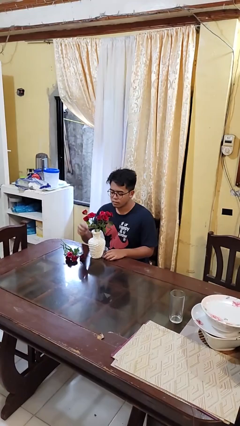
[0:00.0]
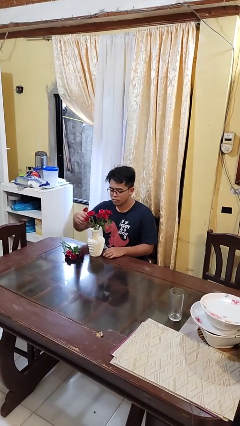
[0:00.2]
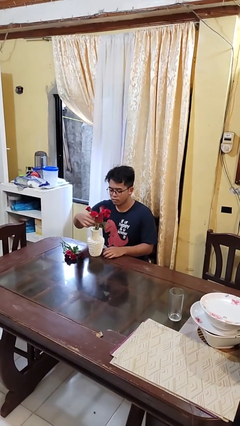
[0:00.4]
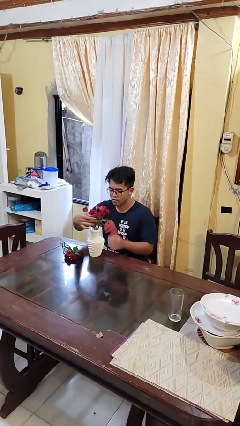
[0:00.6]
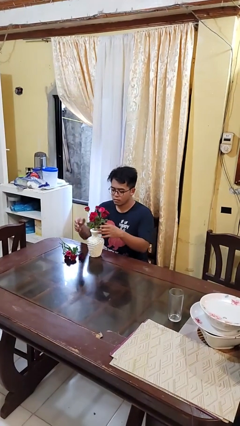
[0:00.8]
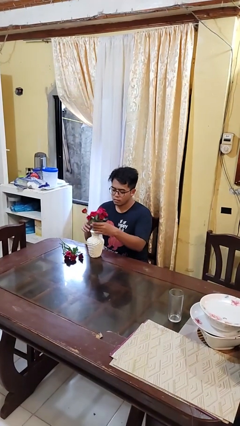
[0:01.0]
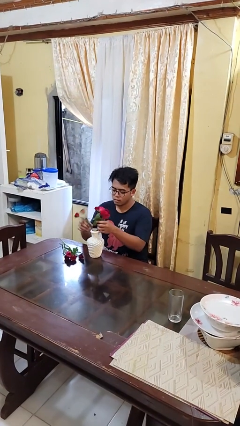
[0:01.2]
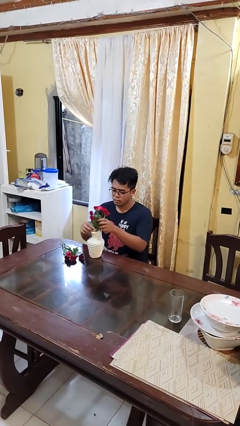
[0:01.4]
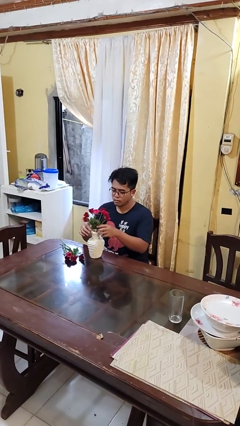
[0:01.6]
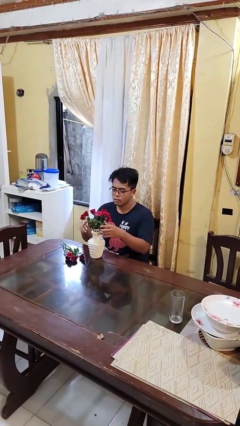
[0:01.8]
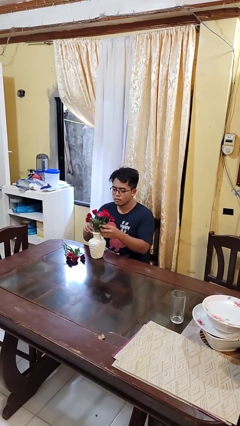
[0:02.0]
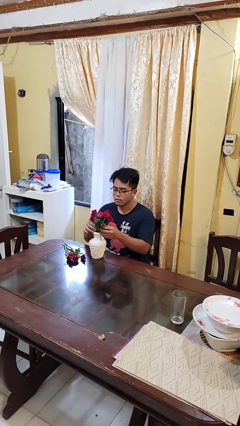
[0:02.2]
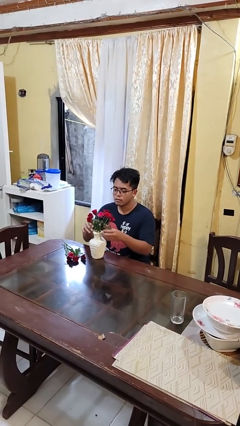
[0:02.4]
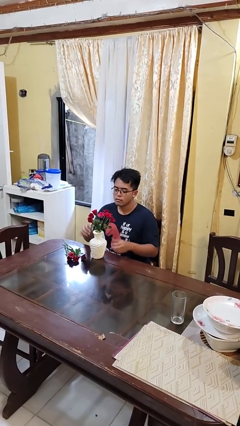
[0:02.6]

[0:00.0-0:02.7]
person arranges flowers in vase

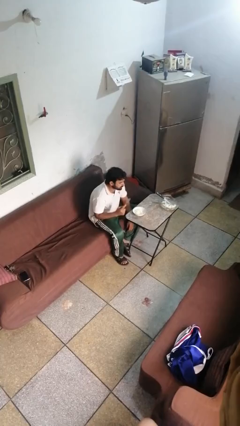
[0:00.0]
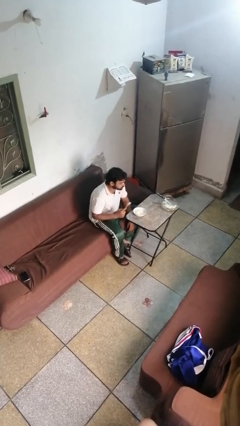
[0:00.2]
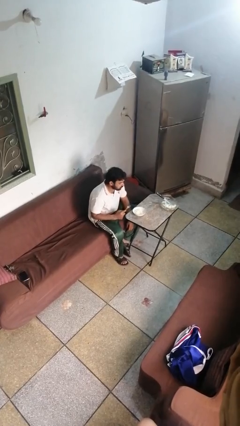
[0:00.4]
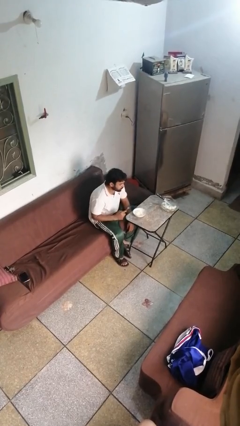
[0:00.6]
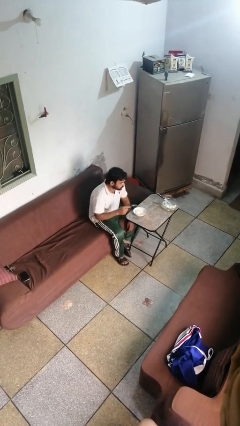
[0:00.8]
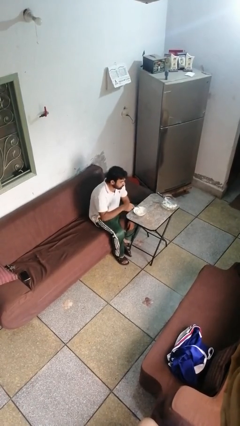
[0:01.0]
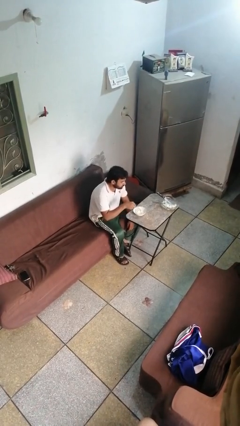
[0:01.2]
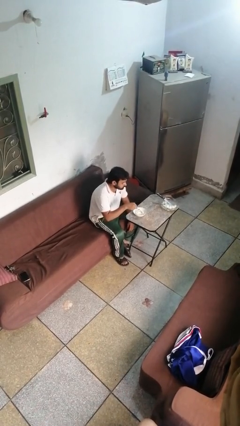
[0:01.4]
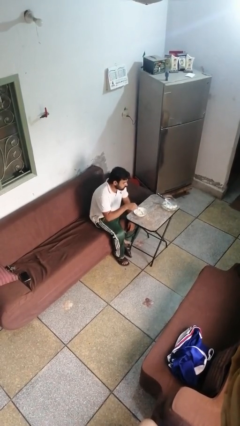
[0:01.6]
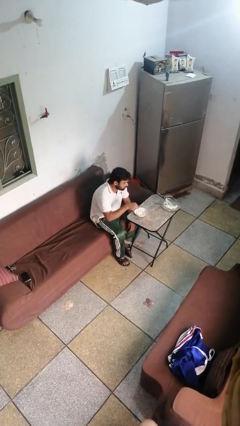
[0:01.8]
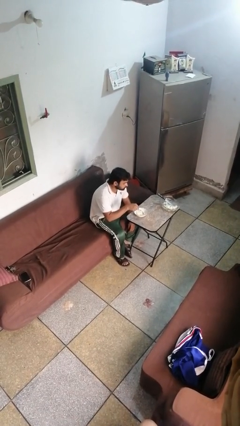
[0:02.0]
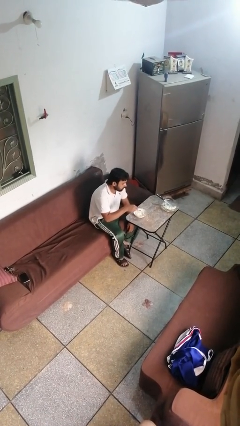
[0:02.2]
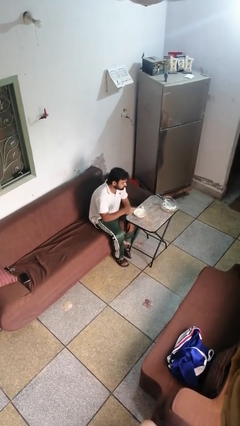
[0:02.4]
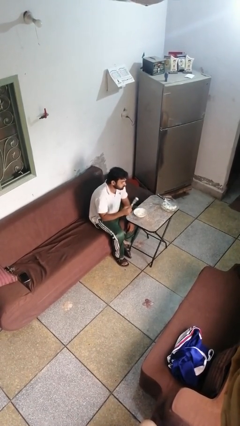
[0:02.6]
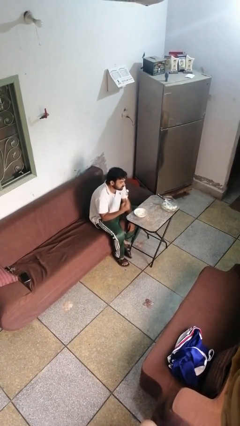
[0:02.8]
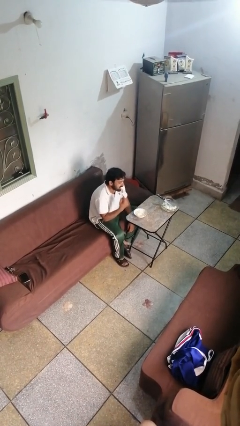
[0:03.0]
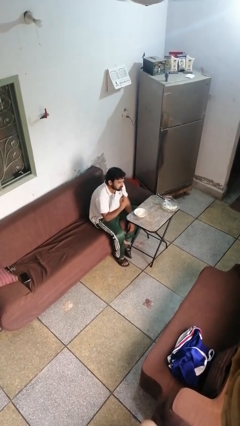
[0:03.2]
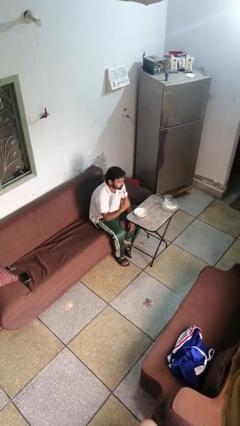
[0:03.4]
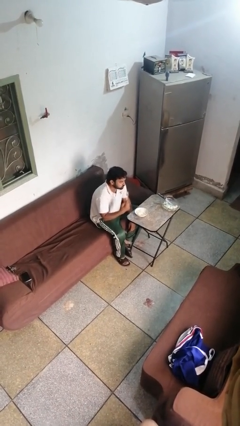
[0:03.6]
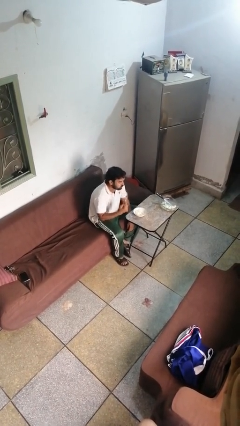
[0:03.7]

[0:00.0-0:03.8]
person eats with utensil

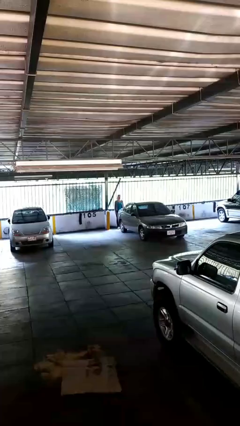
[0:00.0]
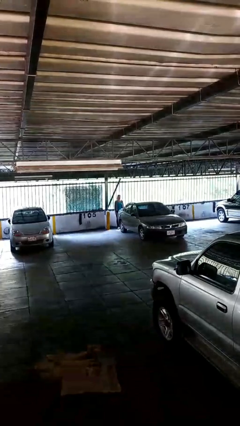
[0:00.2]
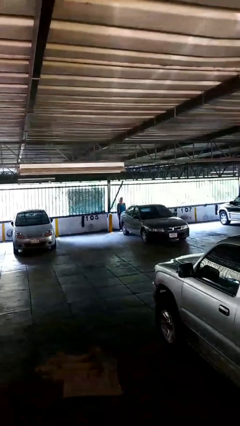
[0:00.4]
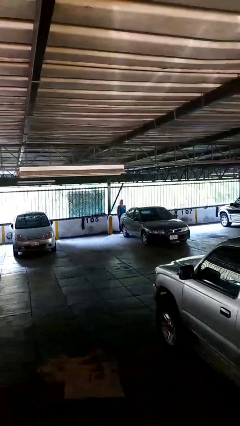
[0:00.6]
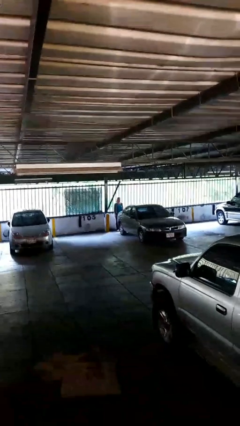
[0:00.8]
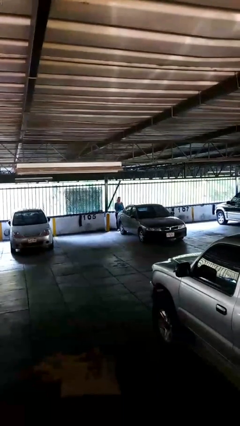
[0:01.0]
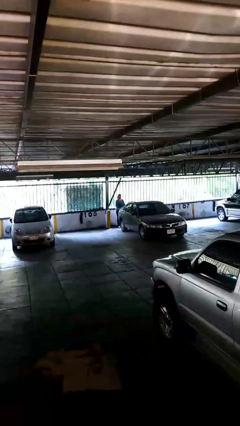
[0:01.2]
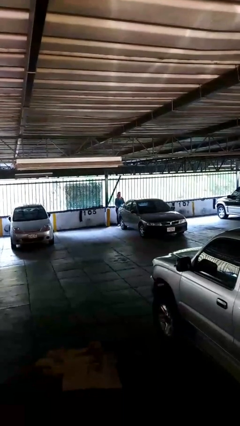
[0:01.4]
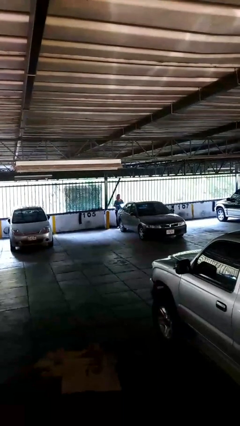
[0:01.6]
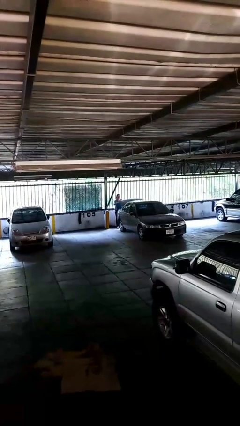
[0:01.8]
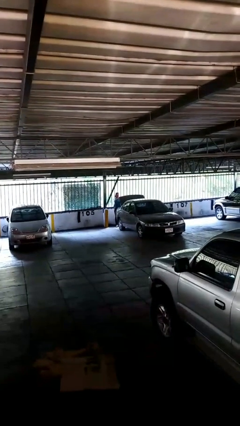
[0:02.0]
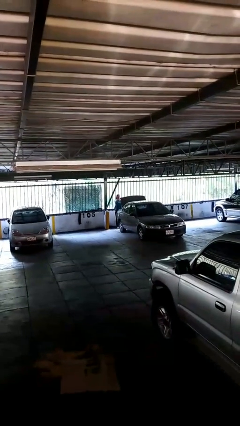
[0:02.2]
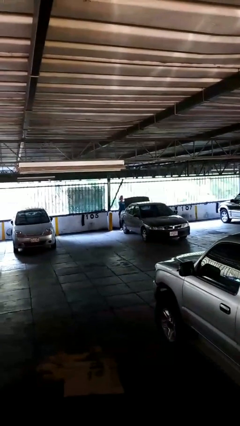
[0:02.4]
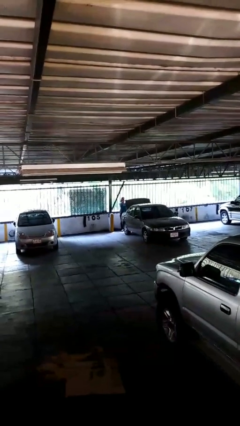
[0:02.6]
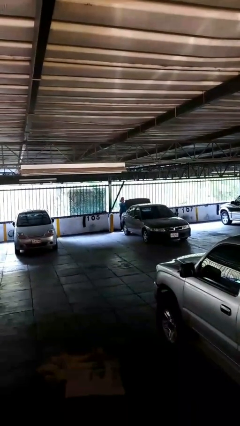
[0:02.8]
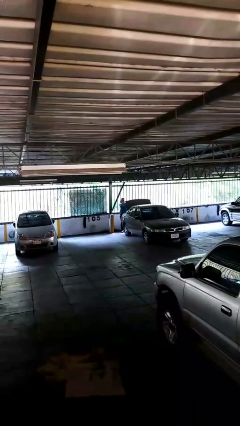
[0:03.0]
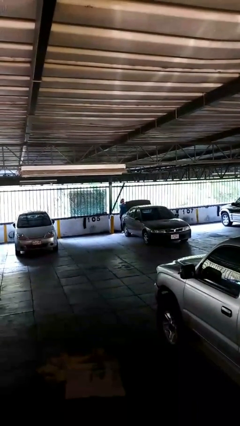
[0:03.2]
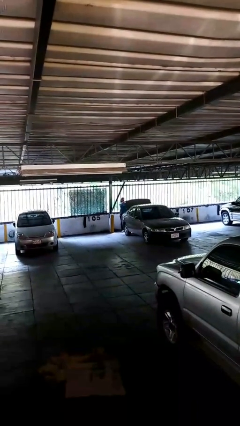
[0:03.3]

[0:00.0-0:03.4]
person opens car trunk

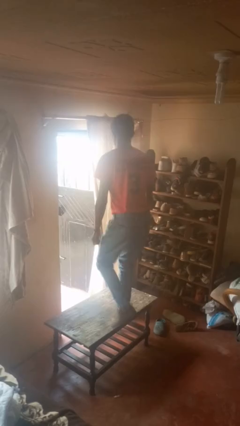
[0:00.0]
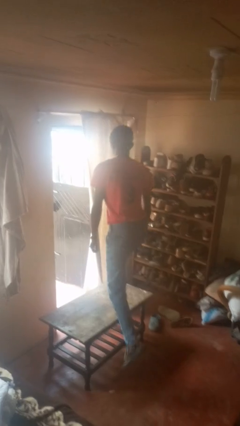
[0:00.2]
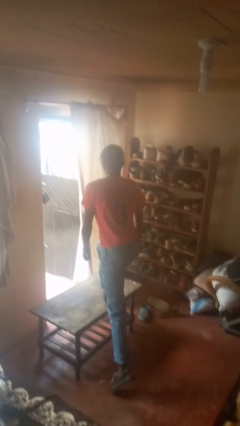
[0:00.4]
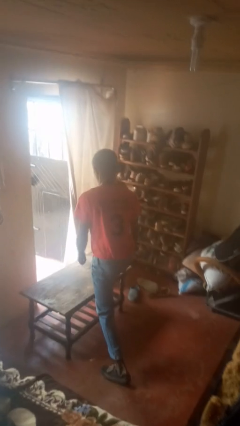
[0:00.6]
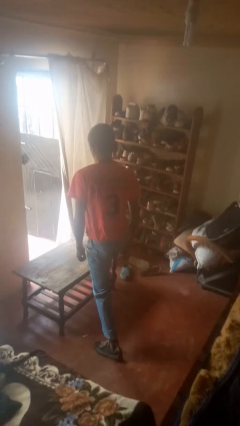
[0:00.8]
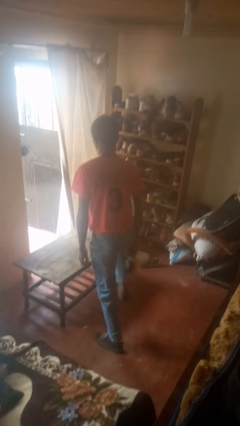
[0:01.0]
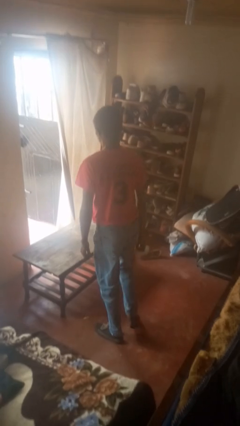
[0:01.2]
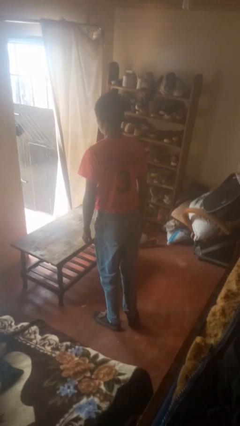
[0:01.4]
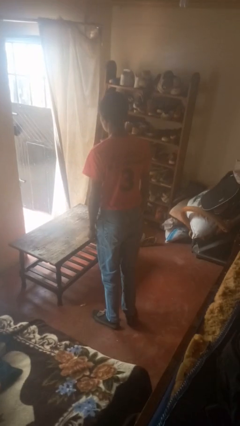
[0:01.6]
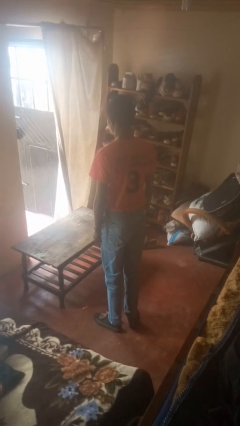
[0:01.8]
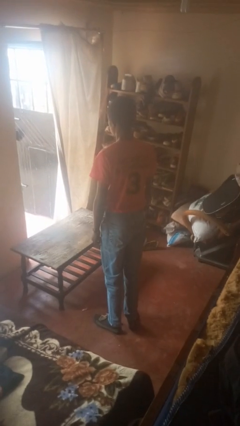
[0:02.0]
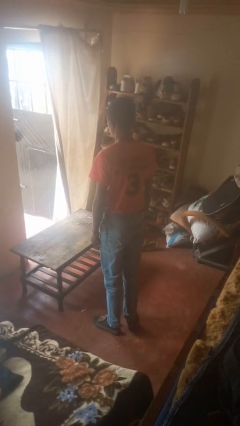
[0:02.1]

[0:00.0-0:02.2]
person climbs off table

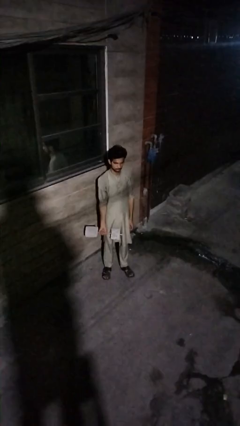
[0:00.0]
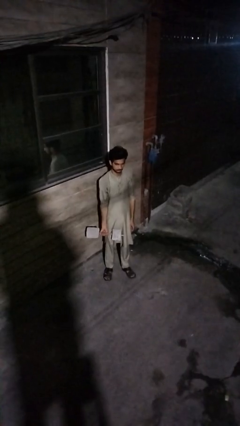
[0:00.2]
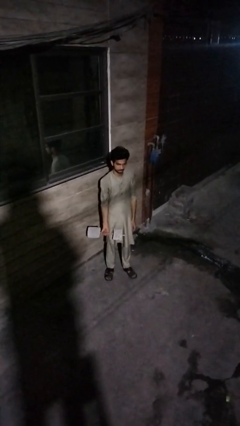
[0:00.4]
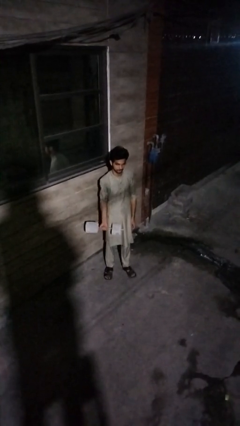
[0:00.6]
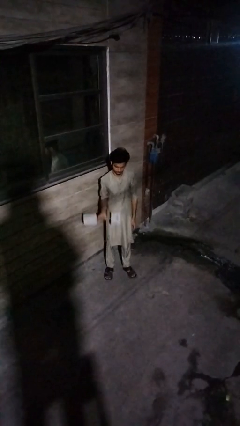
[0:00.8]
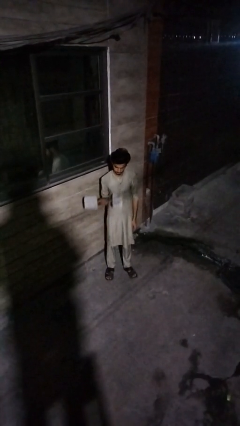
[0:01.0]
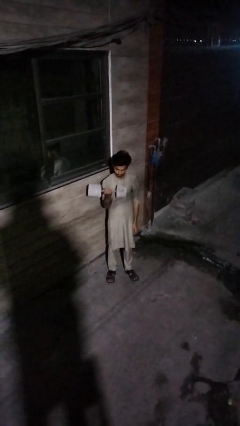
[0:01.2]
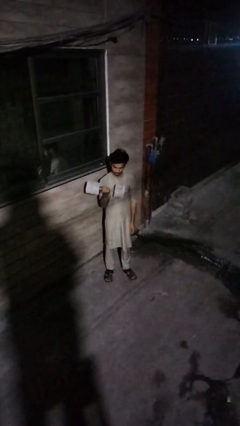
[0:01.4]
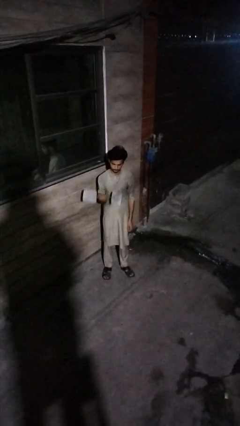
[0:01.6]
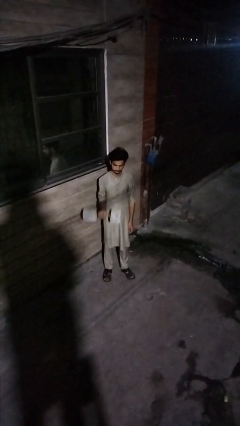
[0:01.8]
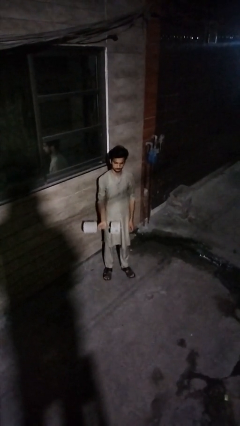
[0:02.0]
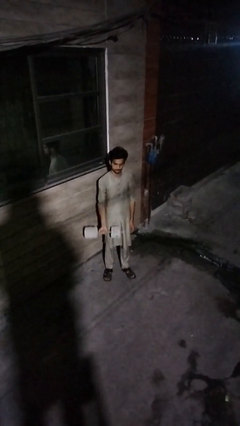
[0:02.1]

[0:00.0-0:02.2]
person lifts dumbbells

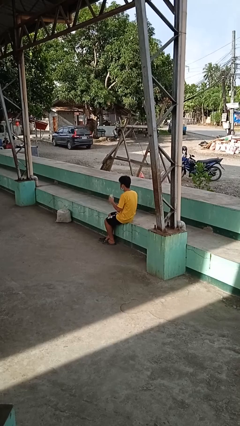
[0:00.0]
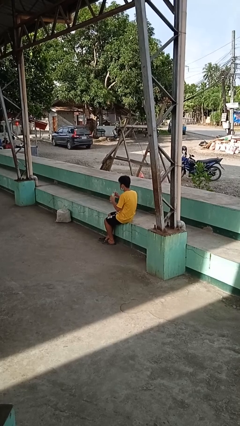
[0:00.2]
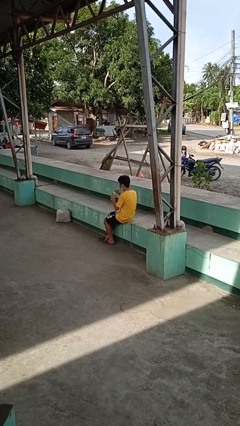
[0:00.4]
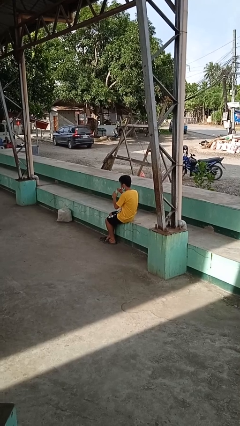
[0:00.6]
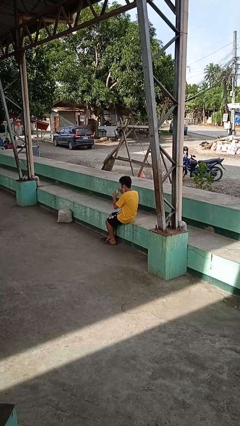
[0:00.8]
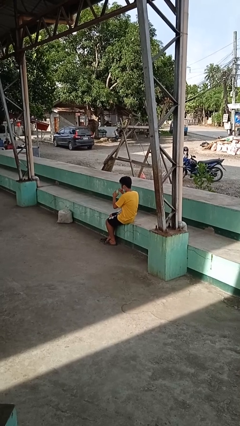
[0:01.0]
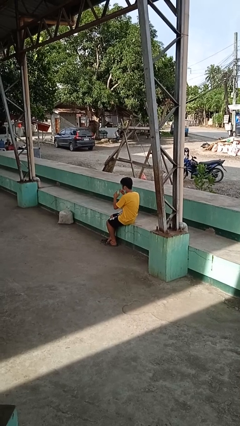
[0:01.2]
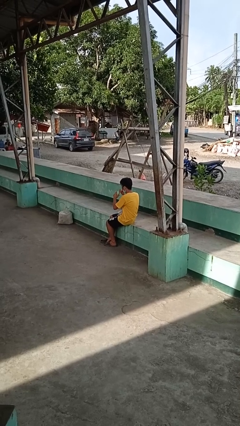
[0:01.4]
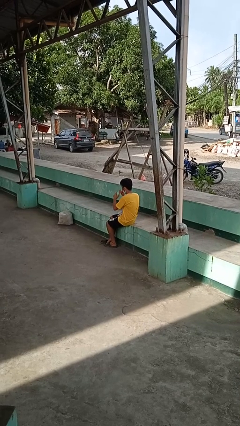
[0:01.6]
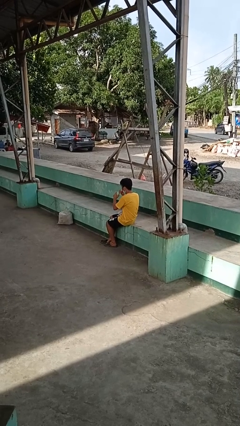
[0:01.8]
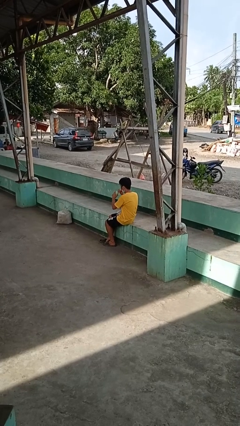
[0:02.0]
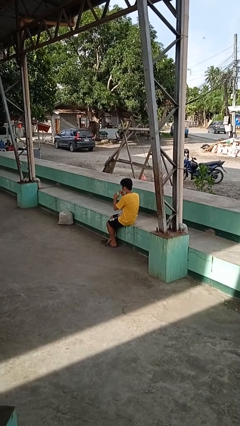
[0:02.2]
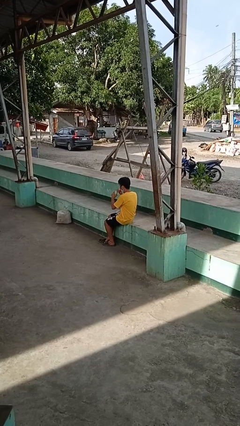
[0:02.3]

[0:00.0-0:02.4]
person drinks from straw

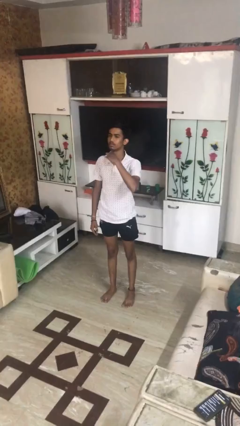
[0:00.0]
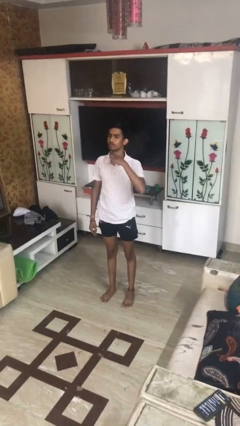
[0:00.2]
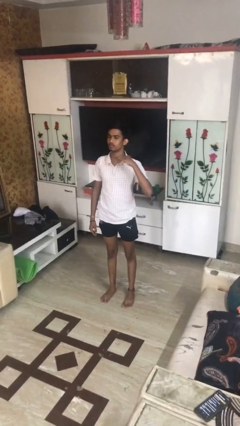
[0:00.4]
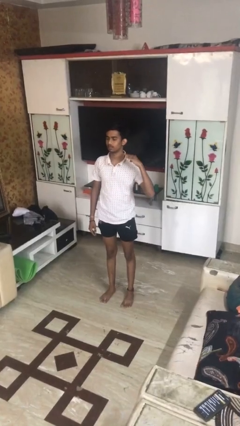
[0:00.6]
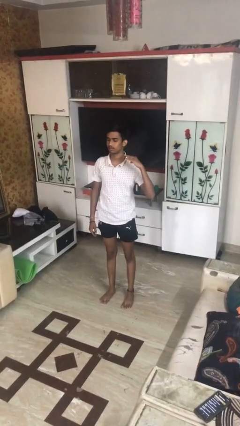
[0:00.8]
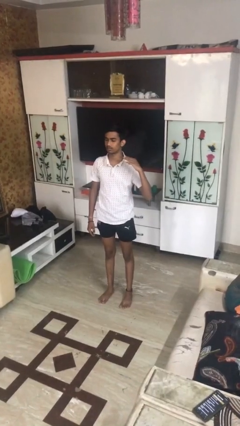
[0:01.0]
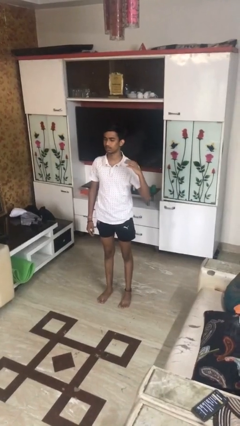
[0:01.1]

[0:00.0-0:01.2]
person gestures cut
